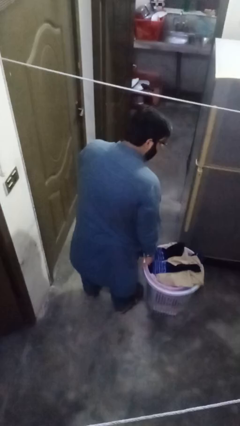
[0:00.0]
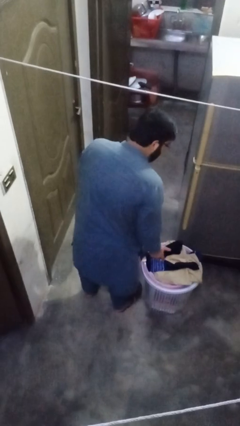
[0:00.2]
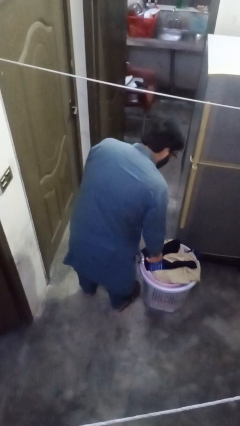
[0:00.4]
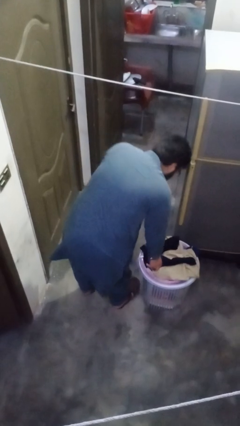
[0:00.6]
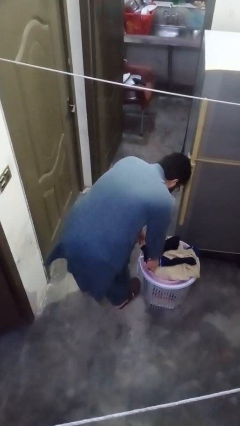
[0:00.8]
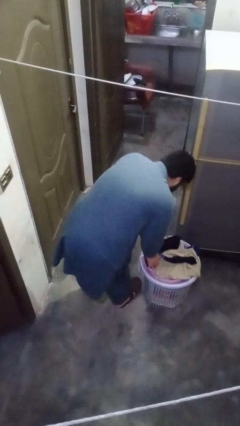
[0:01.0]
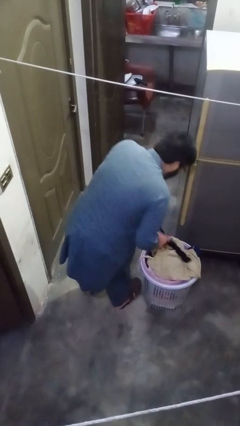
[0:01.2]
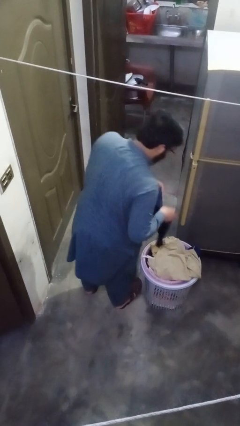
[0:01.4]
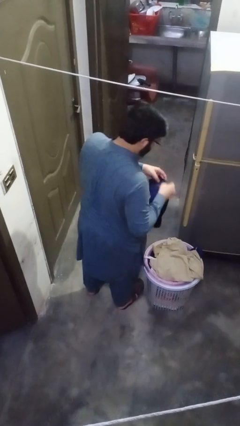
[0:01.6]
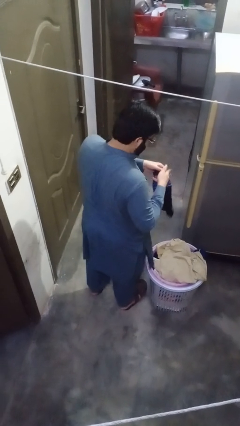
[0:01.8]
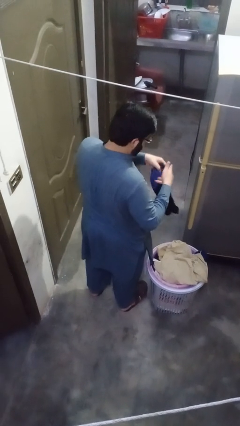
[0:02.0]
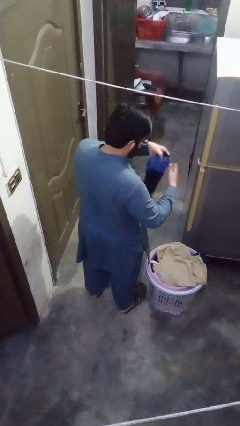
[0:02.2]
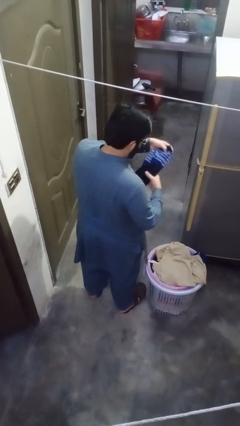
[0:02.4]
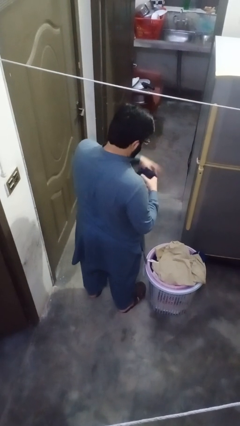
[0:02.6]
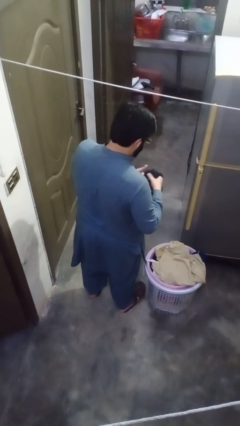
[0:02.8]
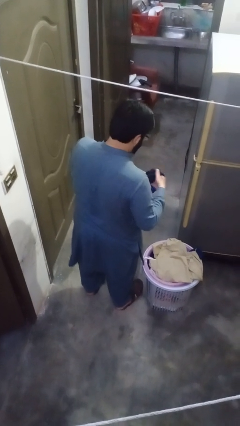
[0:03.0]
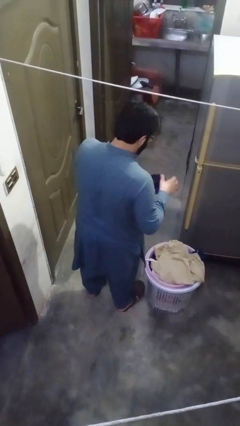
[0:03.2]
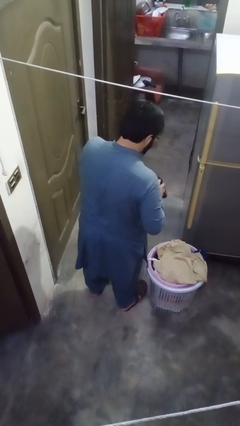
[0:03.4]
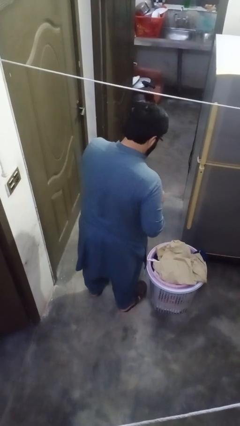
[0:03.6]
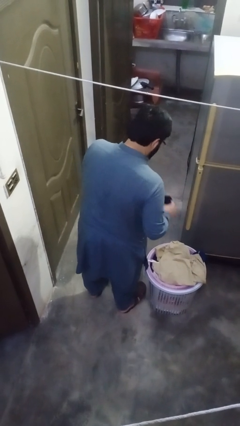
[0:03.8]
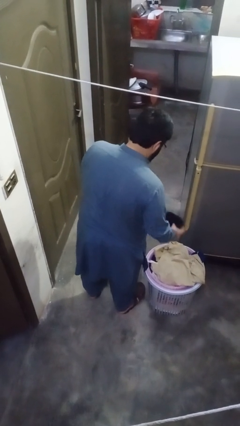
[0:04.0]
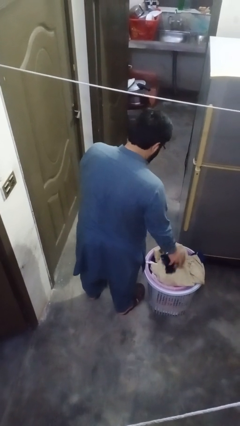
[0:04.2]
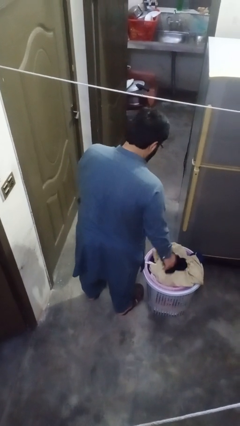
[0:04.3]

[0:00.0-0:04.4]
person folds socks

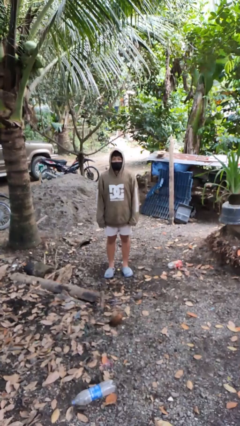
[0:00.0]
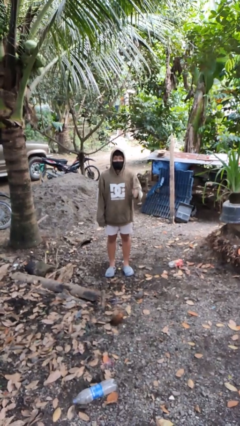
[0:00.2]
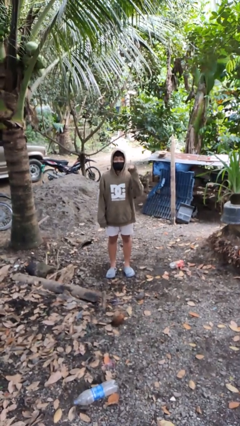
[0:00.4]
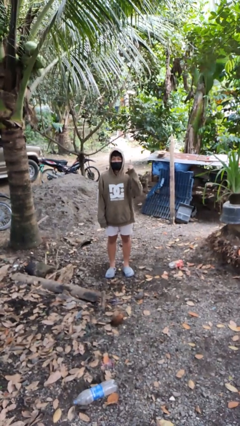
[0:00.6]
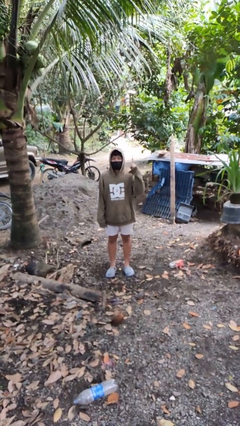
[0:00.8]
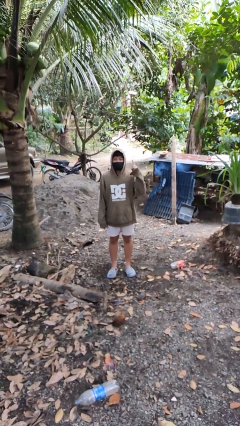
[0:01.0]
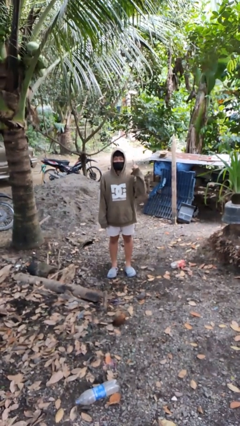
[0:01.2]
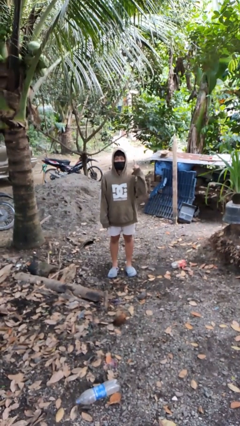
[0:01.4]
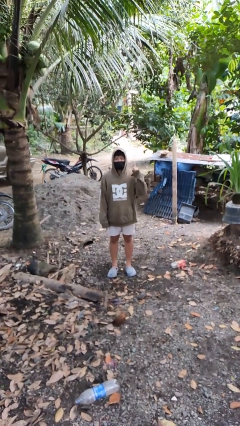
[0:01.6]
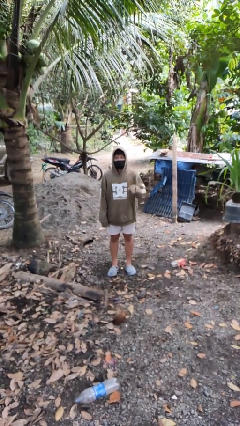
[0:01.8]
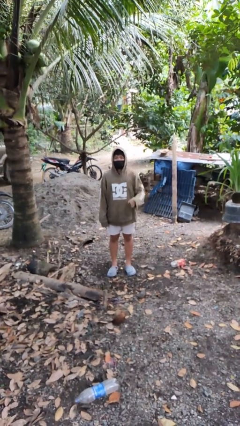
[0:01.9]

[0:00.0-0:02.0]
person gestures number one

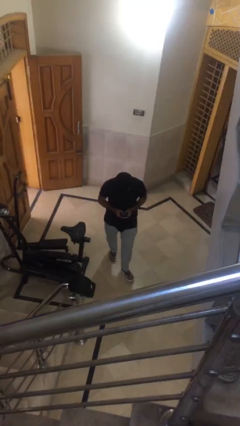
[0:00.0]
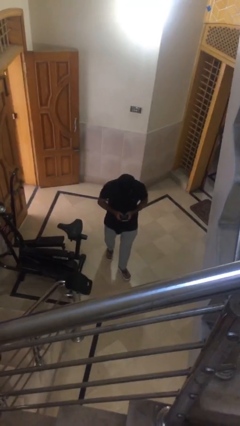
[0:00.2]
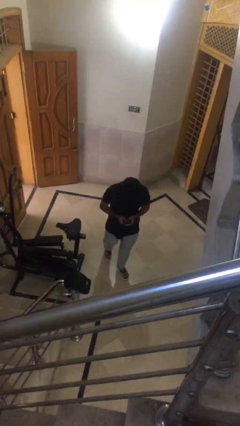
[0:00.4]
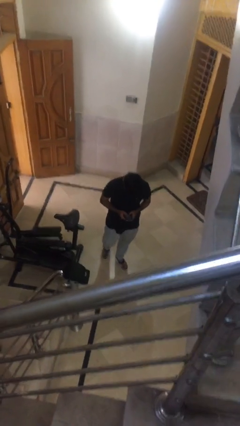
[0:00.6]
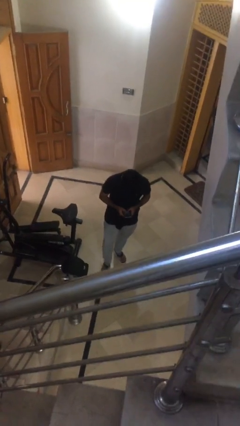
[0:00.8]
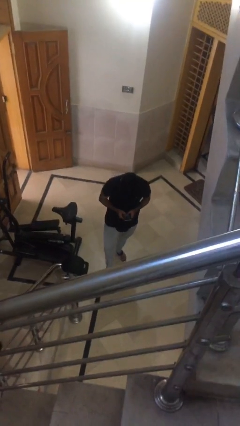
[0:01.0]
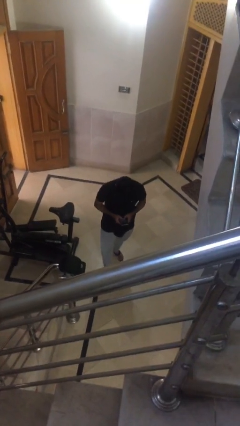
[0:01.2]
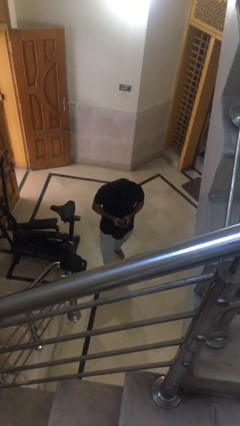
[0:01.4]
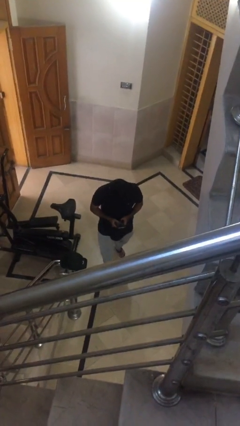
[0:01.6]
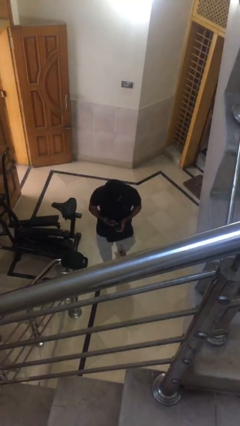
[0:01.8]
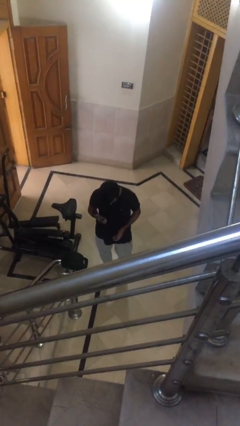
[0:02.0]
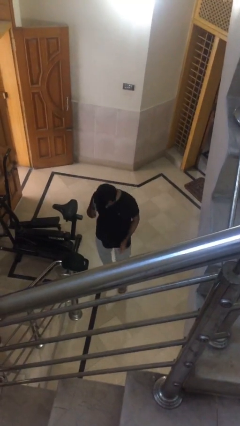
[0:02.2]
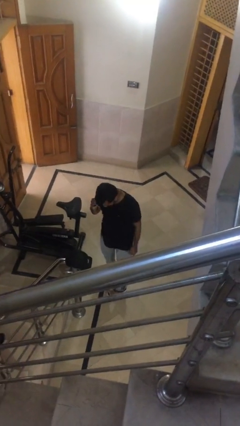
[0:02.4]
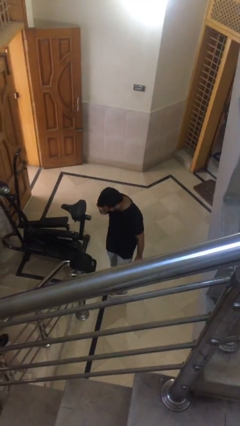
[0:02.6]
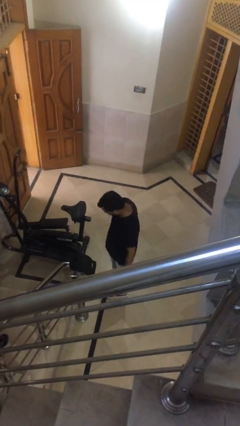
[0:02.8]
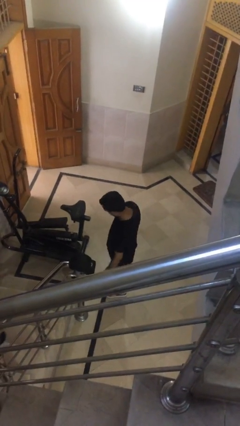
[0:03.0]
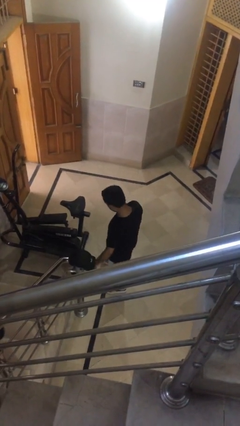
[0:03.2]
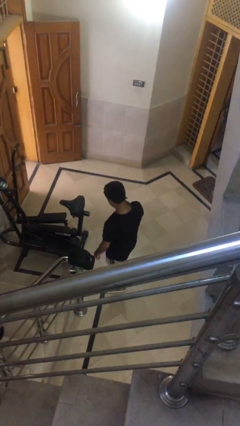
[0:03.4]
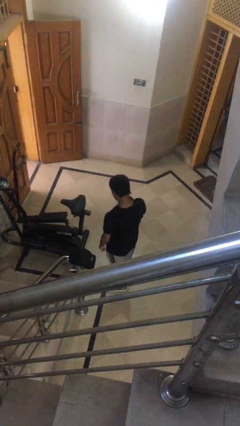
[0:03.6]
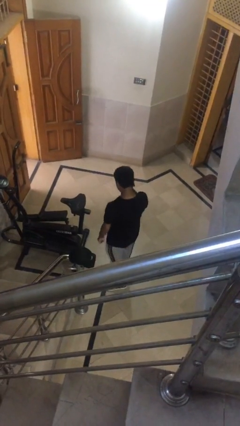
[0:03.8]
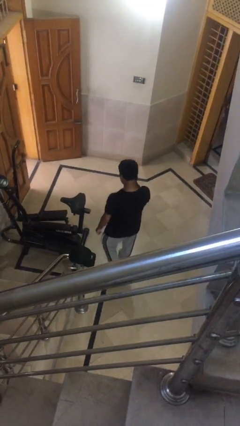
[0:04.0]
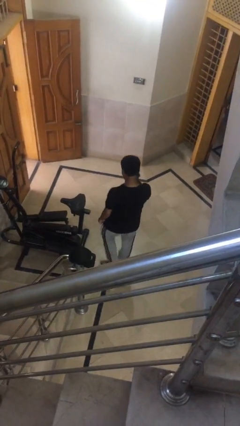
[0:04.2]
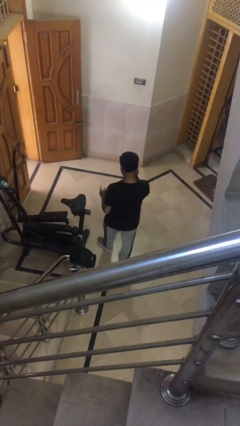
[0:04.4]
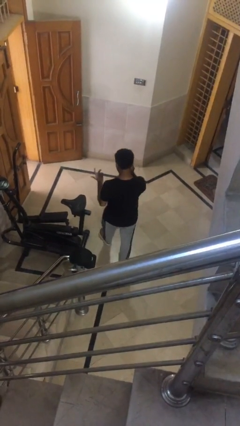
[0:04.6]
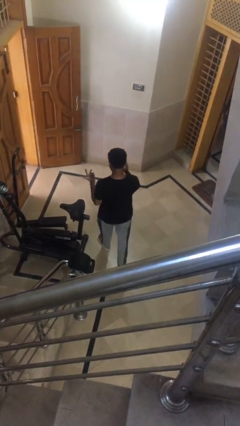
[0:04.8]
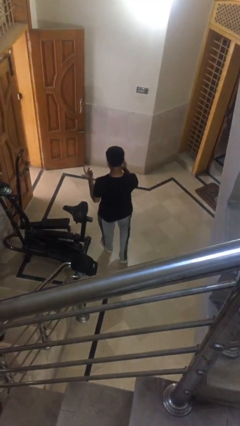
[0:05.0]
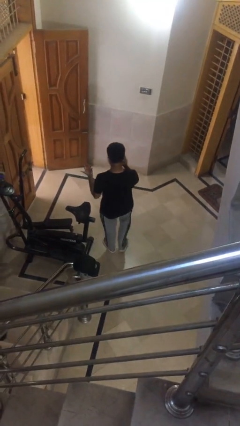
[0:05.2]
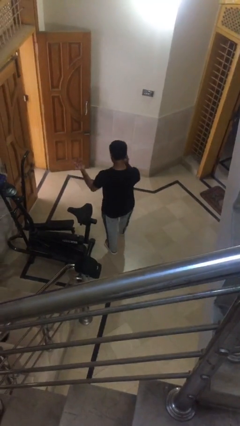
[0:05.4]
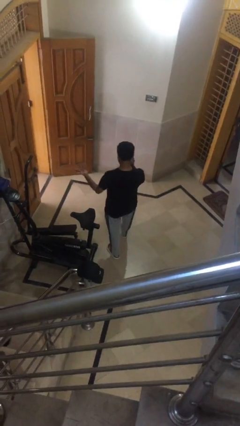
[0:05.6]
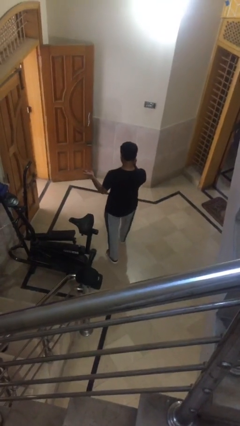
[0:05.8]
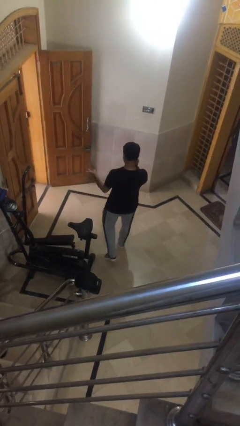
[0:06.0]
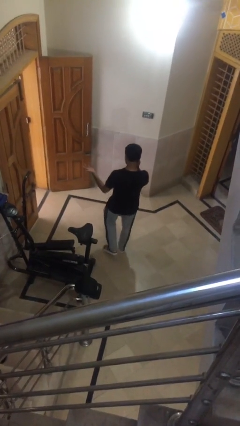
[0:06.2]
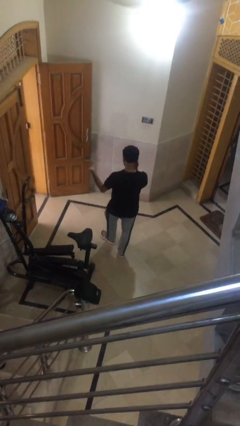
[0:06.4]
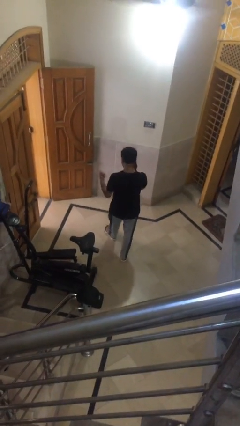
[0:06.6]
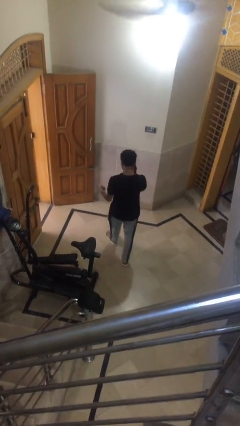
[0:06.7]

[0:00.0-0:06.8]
person talks on phone

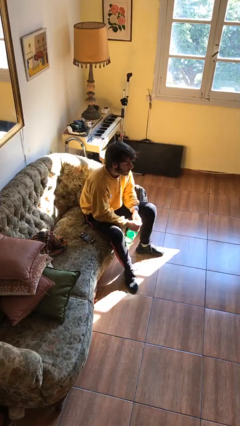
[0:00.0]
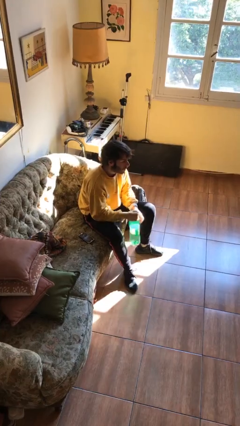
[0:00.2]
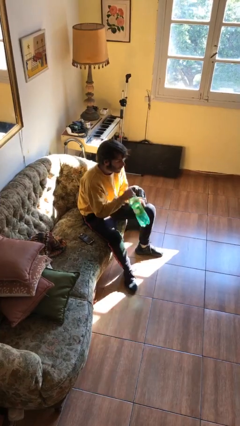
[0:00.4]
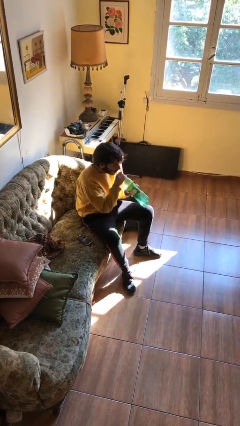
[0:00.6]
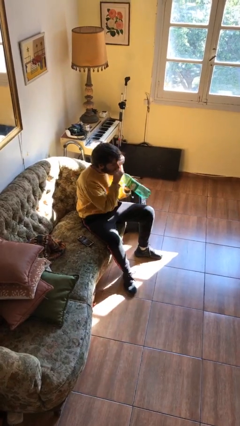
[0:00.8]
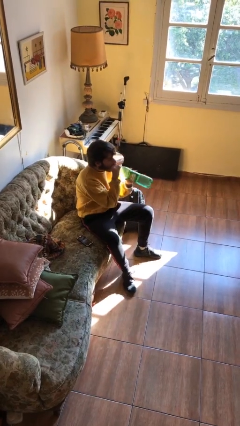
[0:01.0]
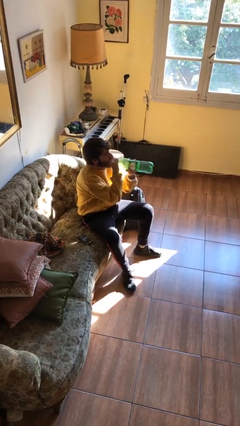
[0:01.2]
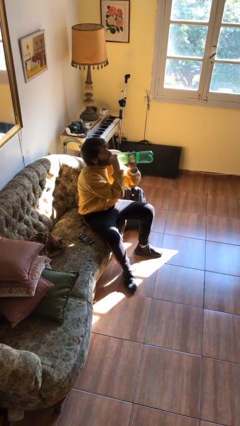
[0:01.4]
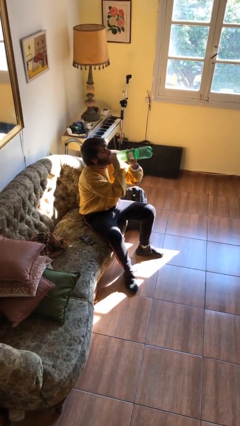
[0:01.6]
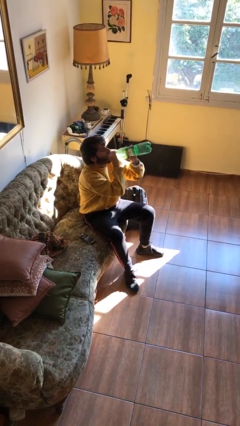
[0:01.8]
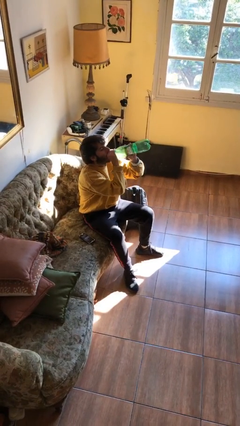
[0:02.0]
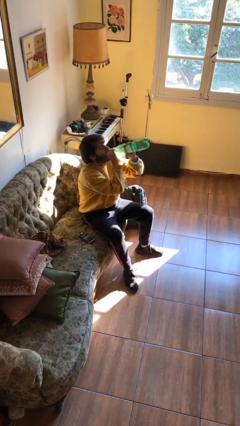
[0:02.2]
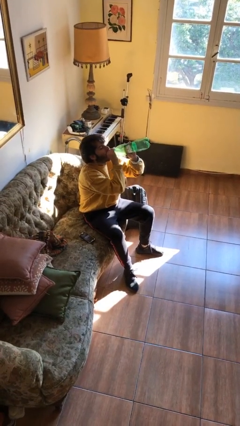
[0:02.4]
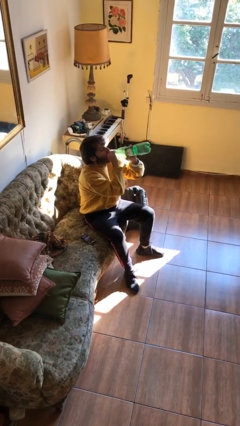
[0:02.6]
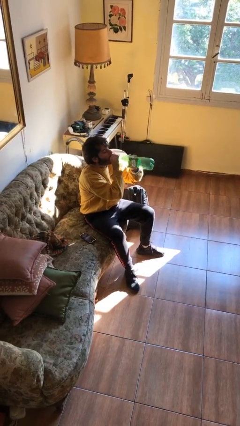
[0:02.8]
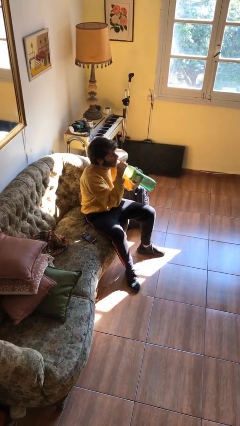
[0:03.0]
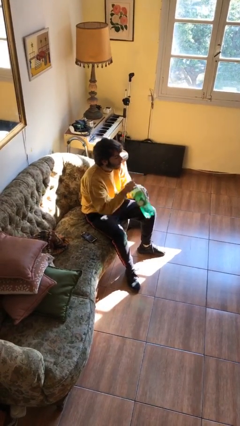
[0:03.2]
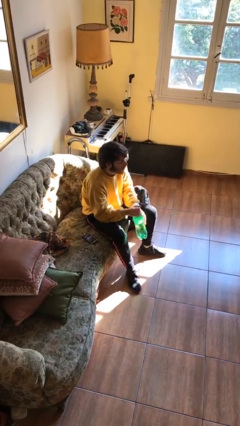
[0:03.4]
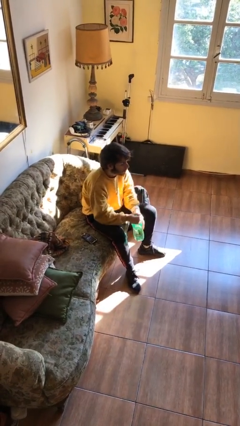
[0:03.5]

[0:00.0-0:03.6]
person drinks from bottle

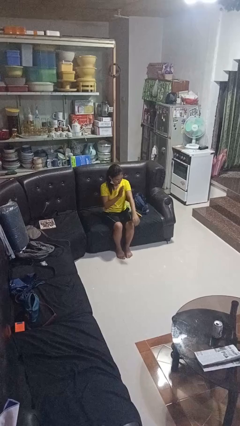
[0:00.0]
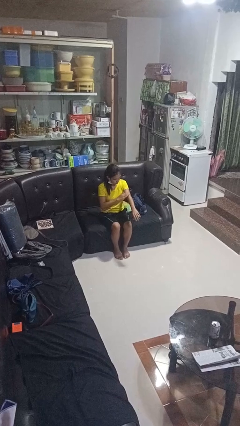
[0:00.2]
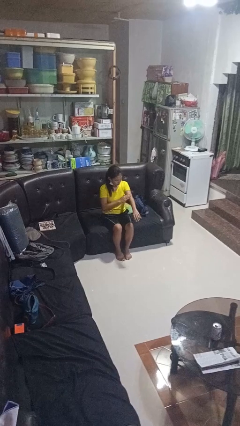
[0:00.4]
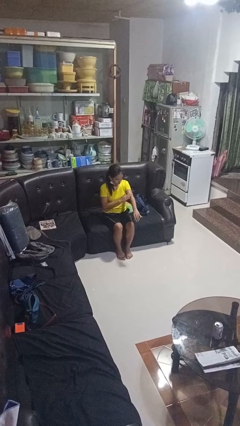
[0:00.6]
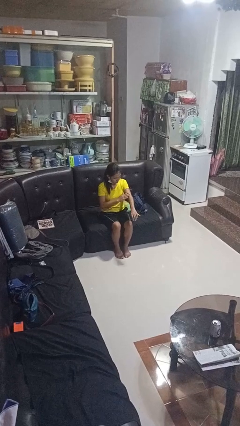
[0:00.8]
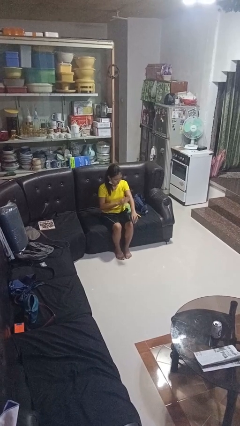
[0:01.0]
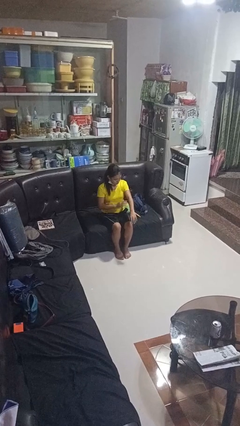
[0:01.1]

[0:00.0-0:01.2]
person swats bug
